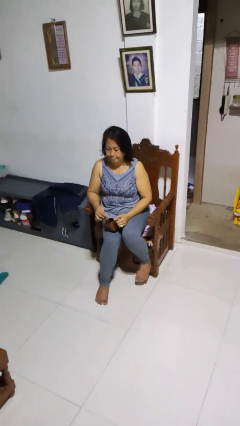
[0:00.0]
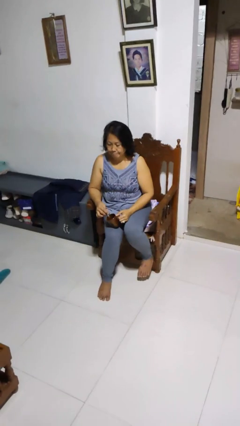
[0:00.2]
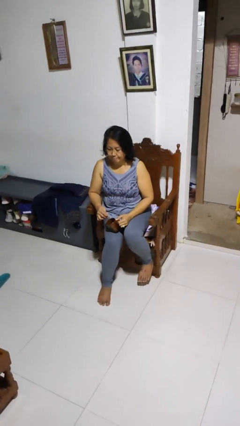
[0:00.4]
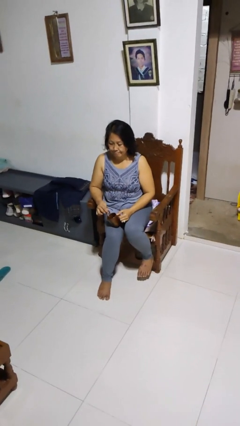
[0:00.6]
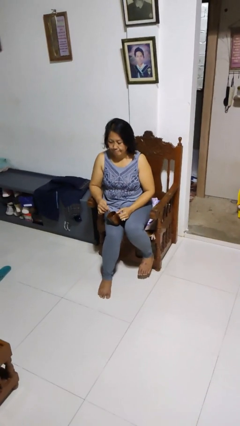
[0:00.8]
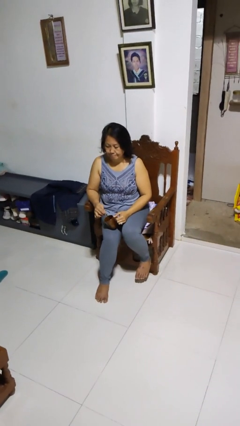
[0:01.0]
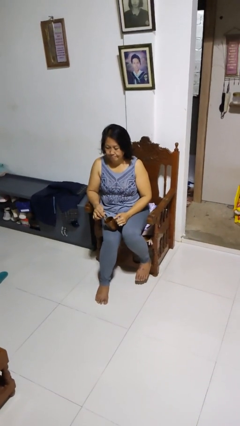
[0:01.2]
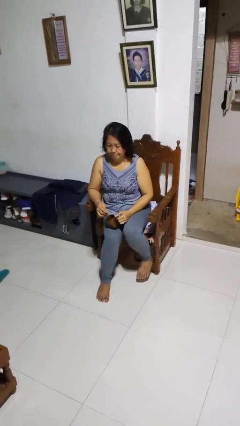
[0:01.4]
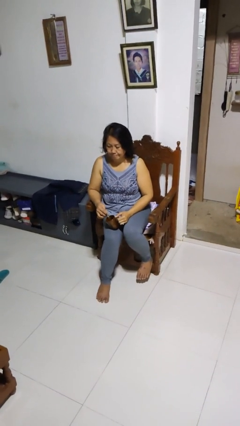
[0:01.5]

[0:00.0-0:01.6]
person stirs mug

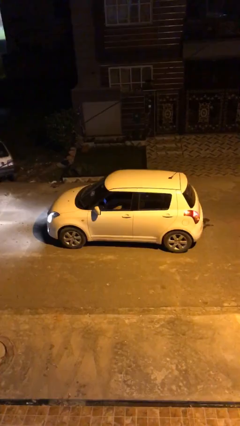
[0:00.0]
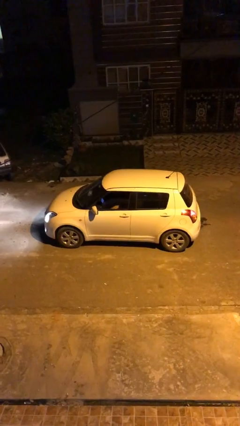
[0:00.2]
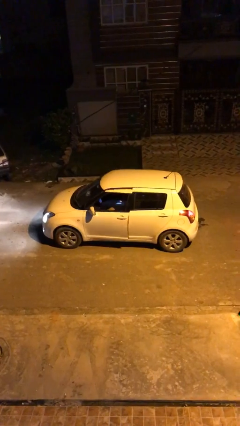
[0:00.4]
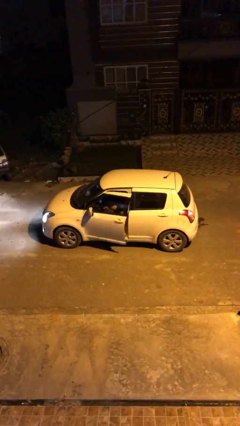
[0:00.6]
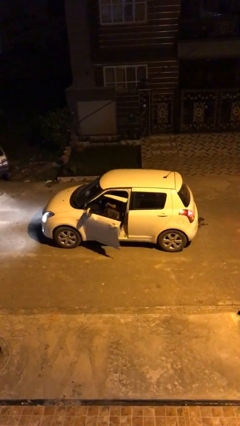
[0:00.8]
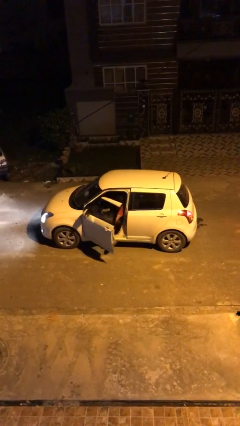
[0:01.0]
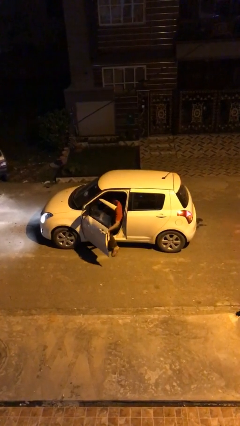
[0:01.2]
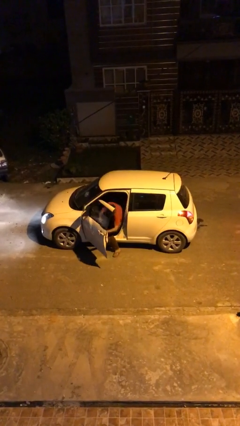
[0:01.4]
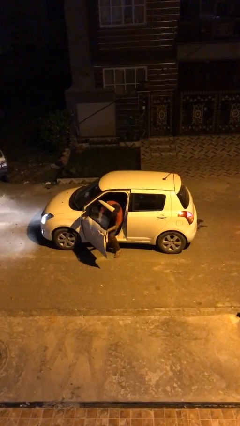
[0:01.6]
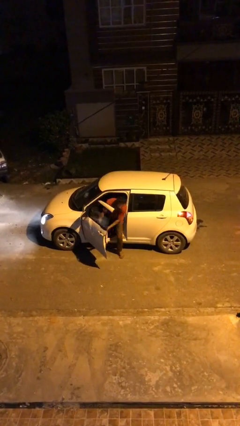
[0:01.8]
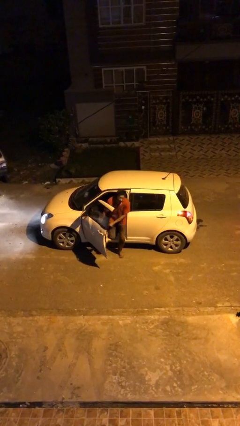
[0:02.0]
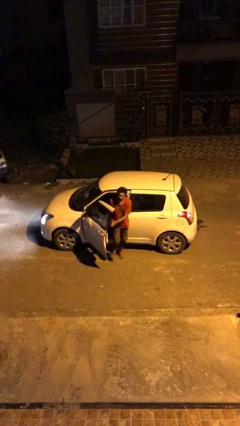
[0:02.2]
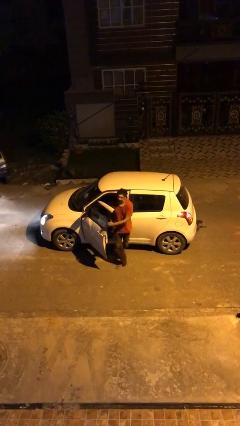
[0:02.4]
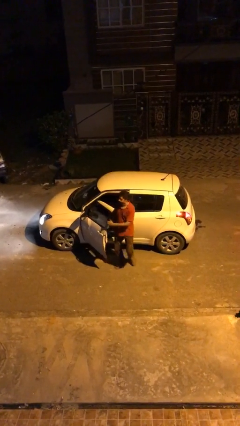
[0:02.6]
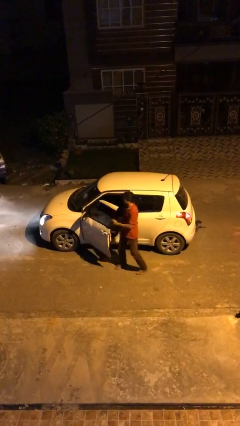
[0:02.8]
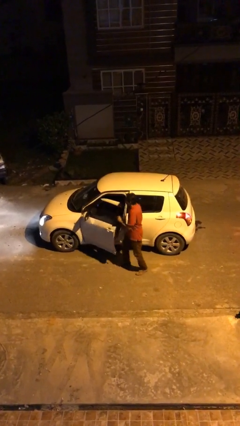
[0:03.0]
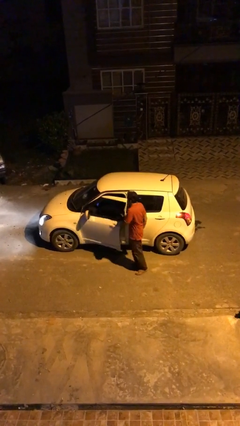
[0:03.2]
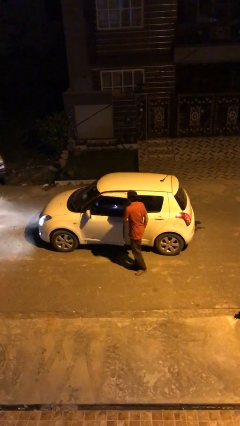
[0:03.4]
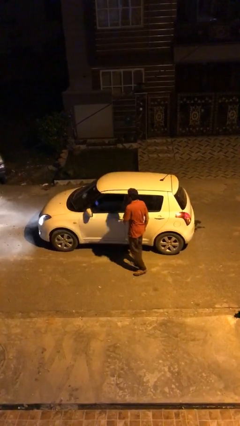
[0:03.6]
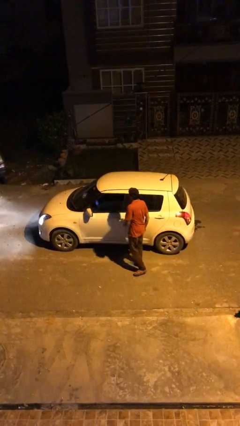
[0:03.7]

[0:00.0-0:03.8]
car drops off person

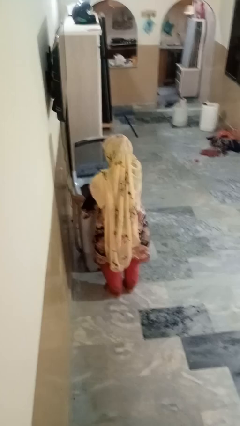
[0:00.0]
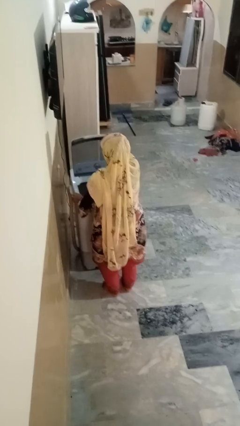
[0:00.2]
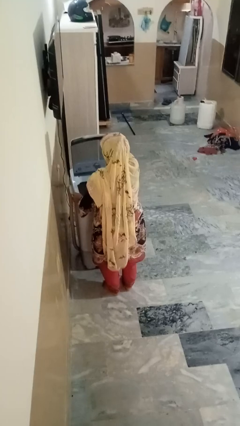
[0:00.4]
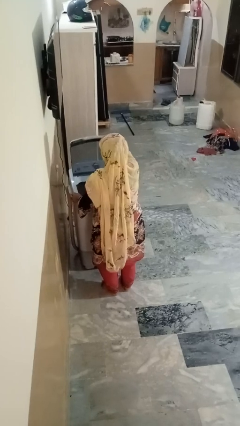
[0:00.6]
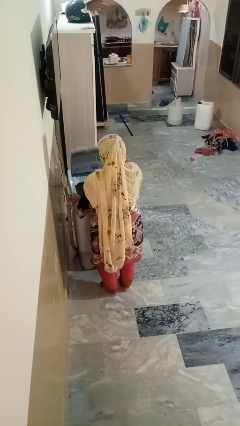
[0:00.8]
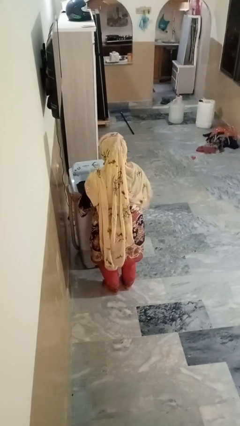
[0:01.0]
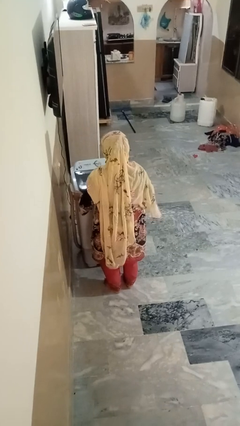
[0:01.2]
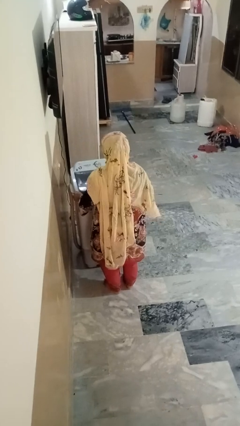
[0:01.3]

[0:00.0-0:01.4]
person closes clothes washer

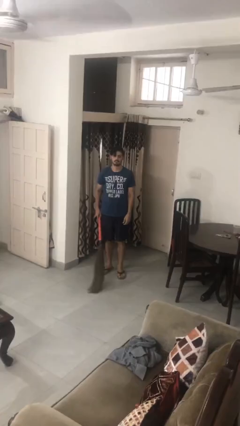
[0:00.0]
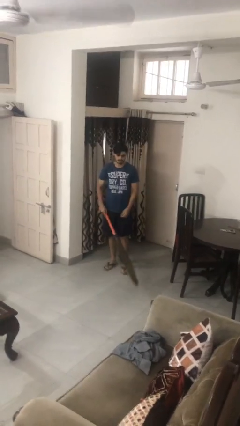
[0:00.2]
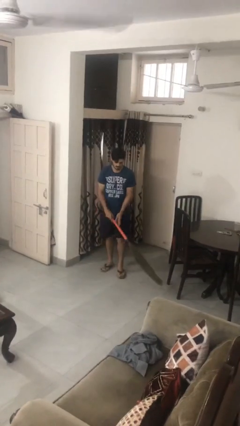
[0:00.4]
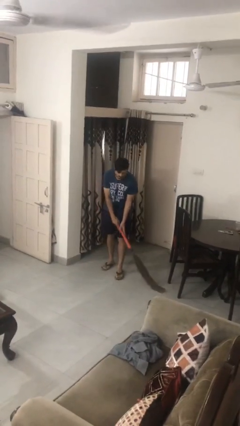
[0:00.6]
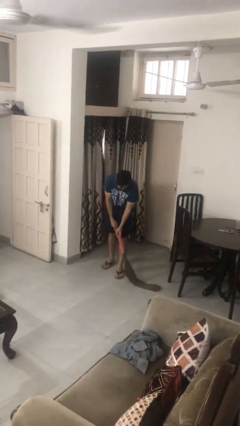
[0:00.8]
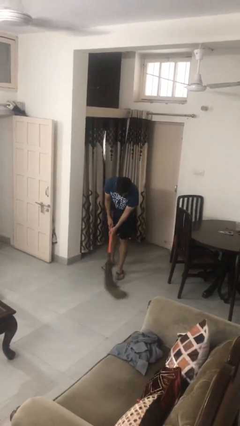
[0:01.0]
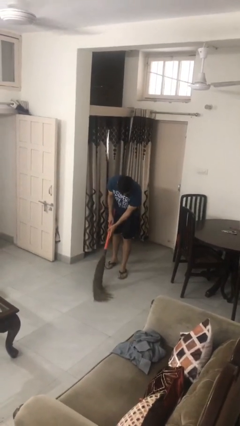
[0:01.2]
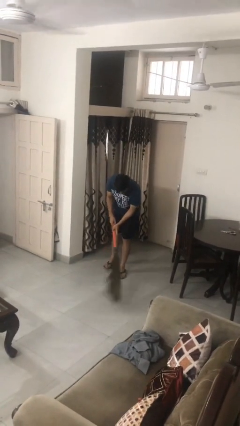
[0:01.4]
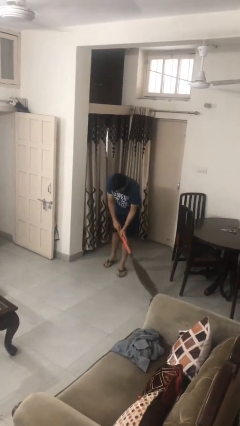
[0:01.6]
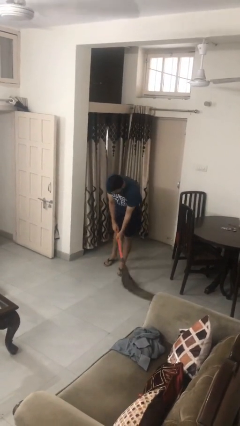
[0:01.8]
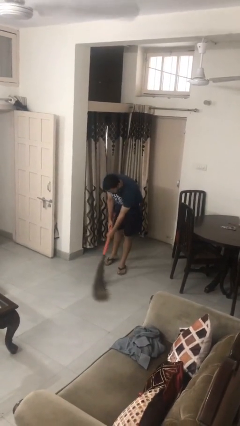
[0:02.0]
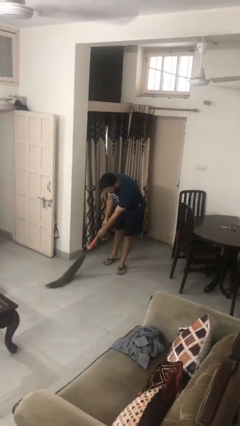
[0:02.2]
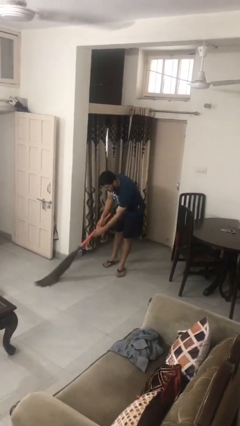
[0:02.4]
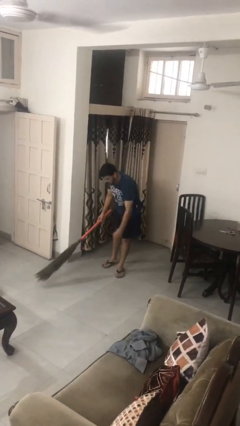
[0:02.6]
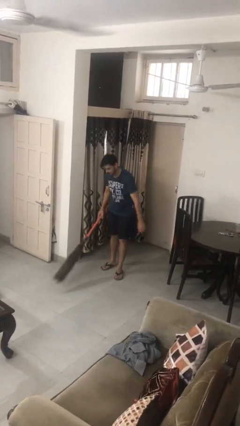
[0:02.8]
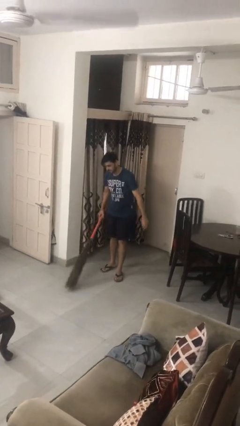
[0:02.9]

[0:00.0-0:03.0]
person sweeps floor

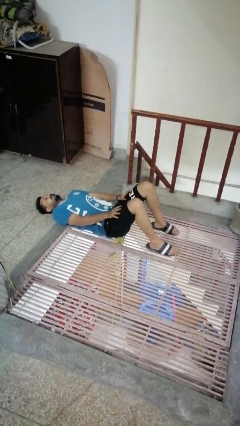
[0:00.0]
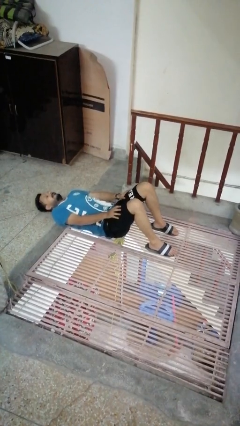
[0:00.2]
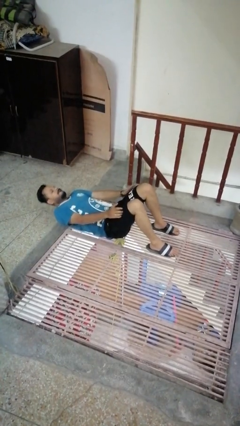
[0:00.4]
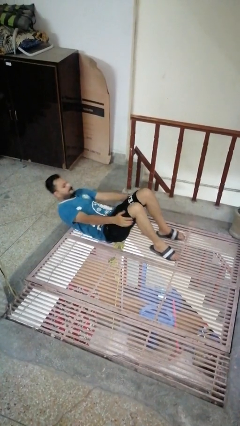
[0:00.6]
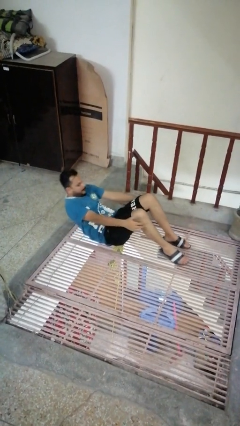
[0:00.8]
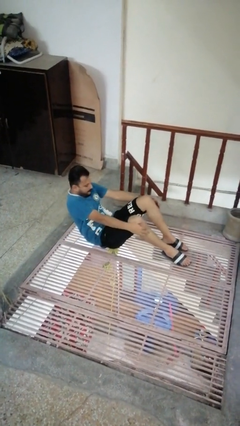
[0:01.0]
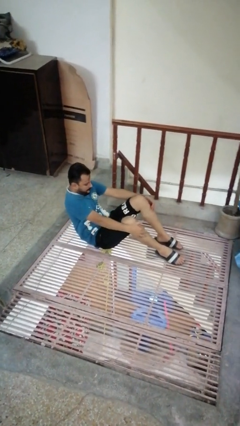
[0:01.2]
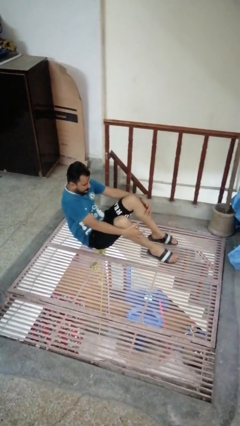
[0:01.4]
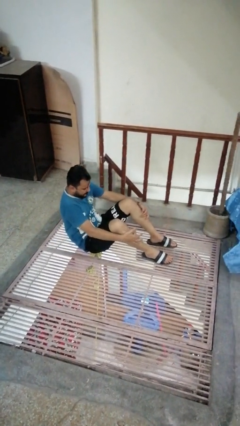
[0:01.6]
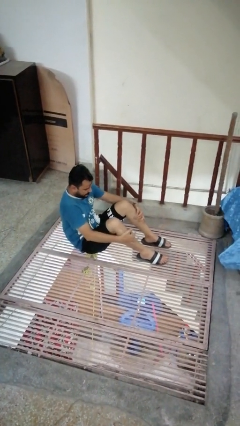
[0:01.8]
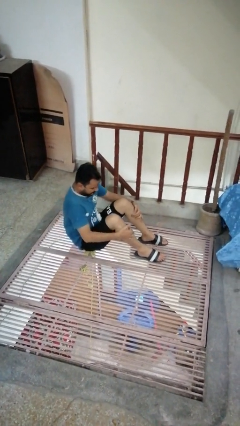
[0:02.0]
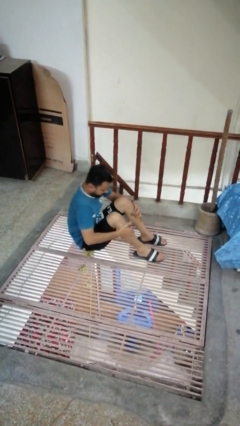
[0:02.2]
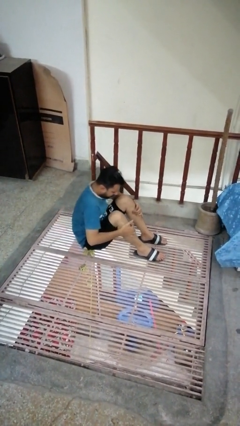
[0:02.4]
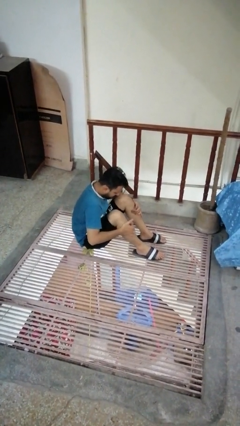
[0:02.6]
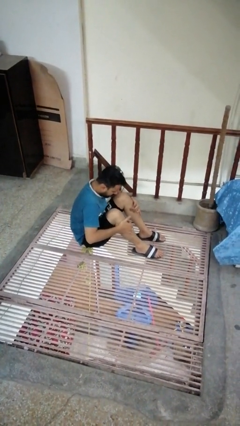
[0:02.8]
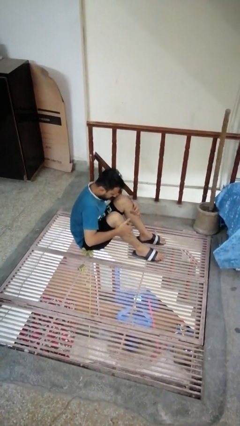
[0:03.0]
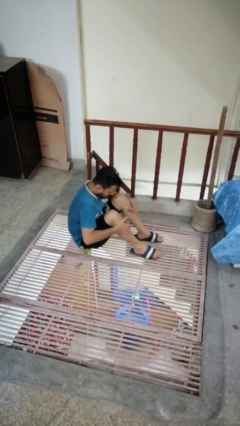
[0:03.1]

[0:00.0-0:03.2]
person exercises with situp

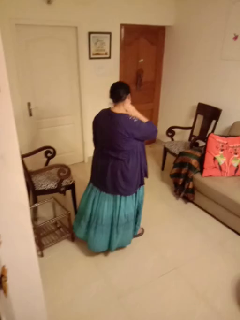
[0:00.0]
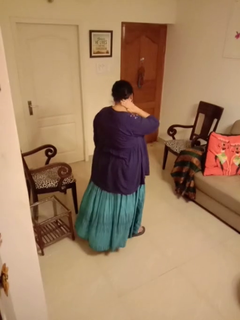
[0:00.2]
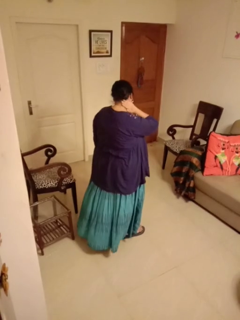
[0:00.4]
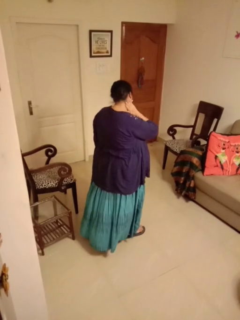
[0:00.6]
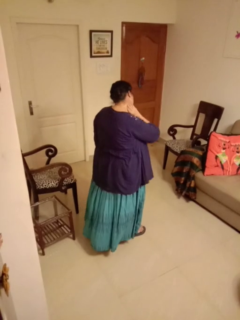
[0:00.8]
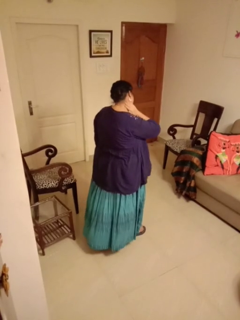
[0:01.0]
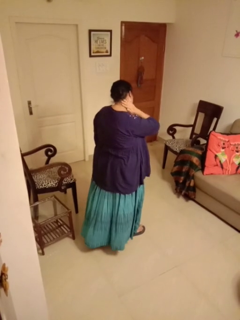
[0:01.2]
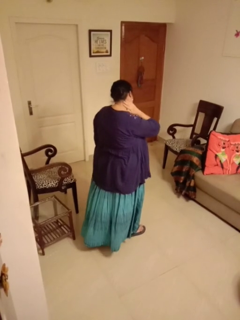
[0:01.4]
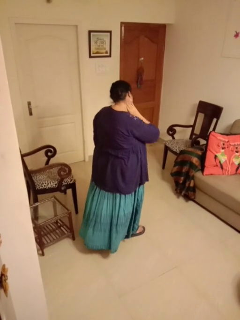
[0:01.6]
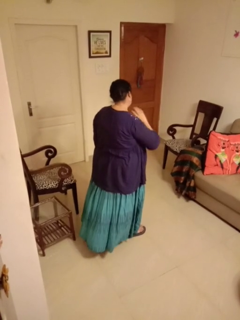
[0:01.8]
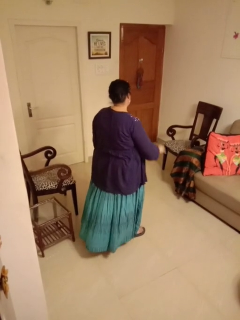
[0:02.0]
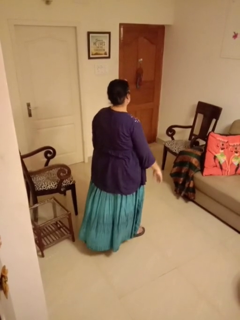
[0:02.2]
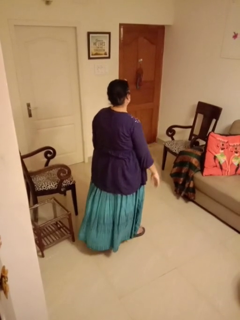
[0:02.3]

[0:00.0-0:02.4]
person rubs neck

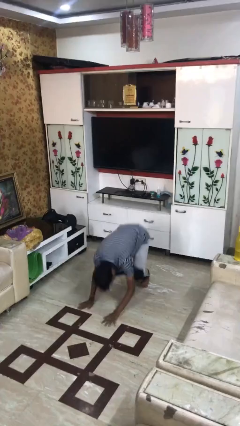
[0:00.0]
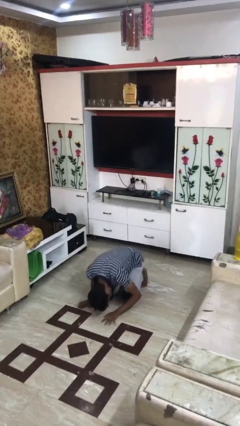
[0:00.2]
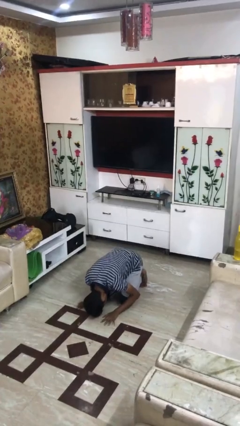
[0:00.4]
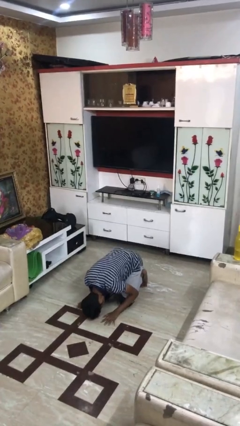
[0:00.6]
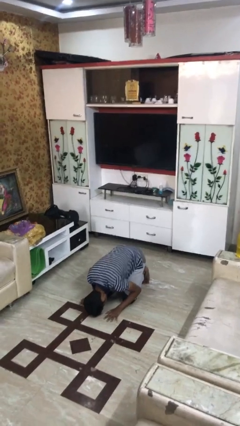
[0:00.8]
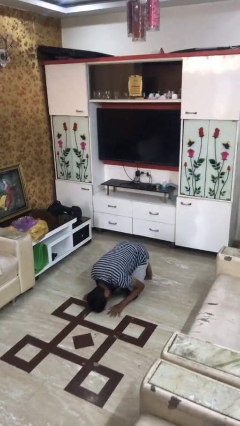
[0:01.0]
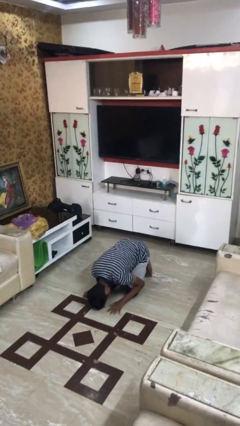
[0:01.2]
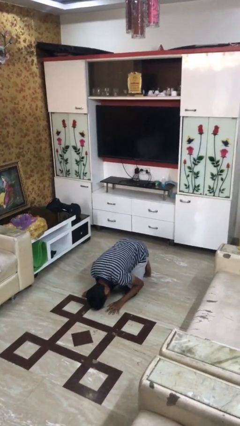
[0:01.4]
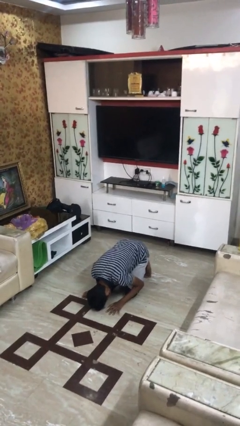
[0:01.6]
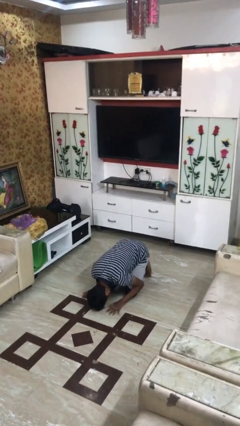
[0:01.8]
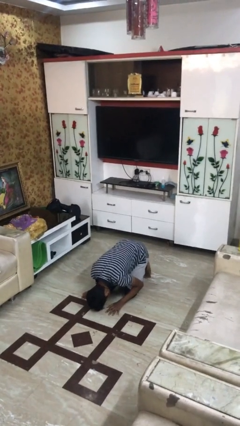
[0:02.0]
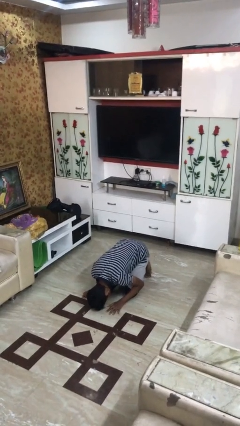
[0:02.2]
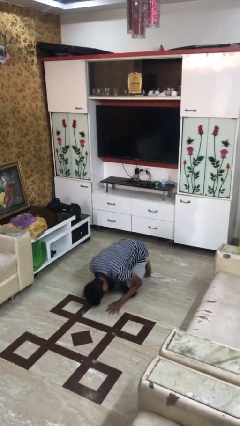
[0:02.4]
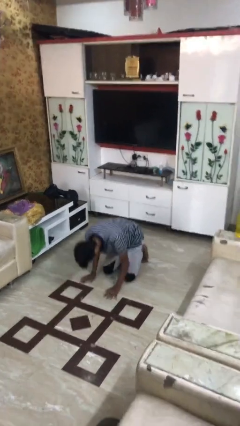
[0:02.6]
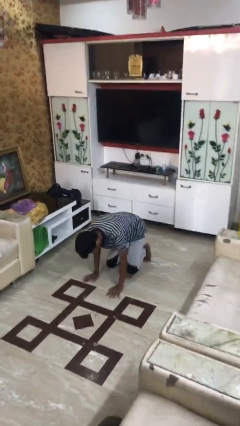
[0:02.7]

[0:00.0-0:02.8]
person falls while standing
